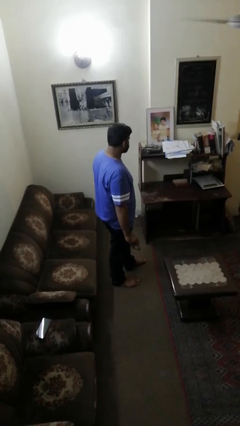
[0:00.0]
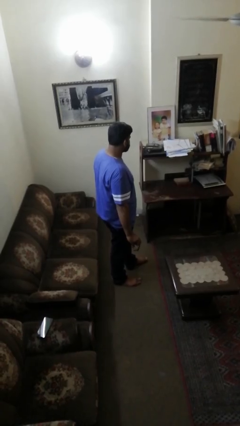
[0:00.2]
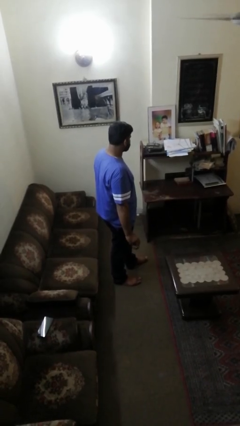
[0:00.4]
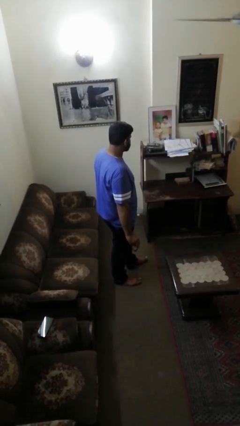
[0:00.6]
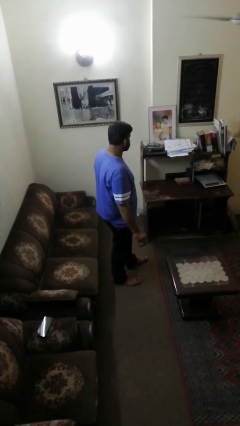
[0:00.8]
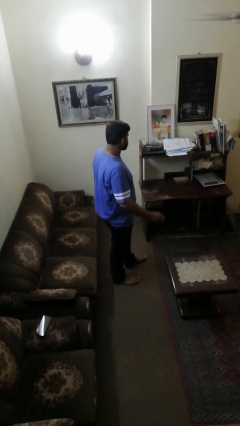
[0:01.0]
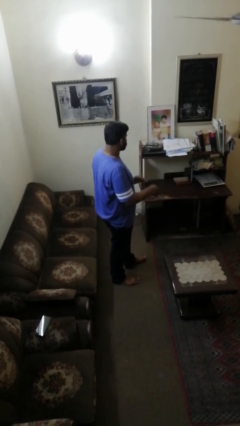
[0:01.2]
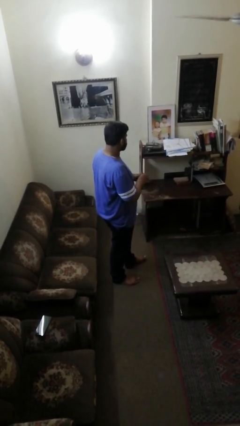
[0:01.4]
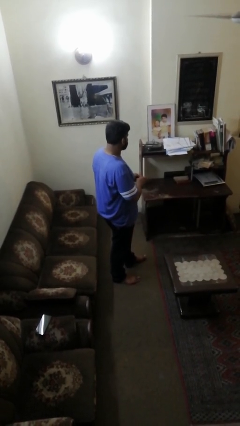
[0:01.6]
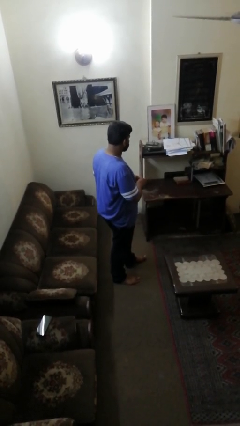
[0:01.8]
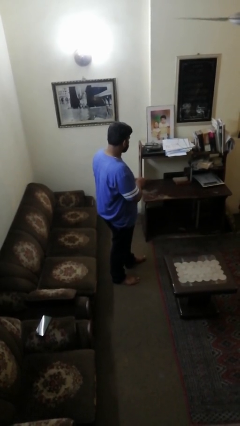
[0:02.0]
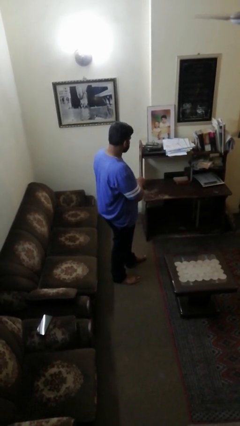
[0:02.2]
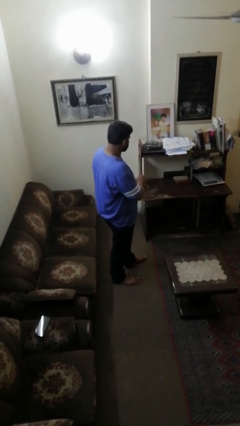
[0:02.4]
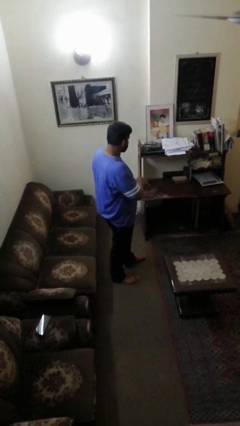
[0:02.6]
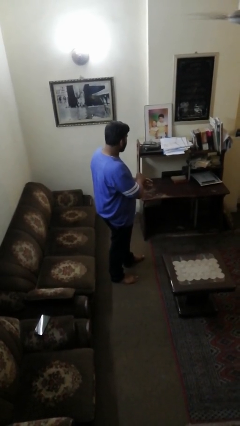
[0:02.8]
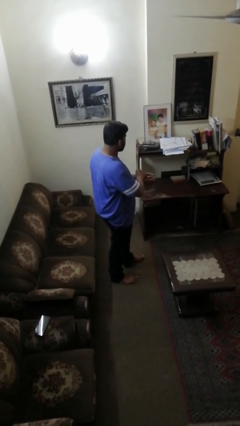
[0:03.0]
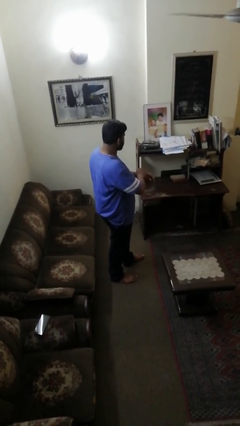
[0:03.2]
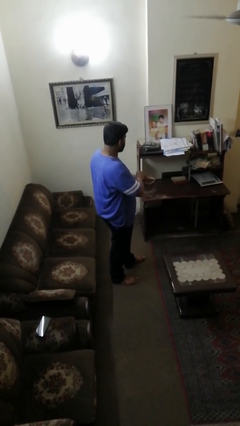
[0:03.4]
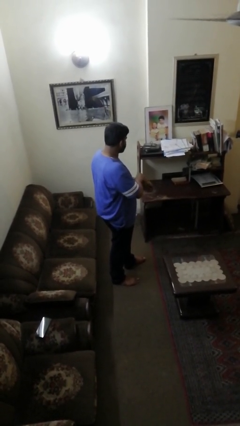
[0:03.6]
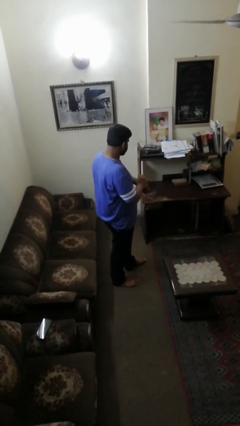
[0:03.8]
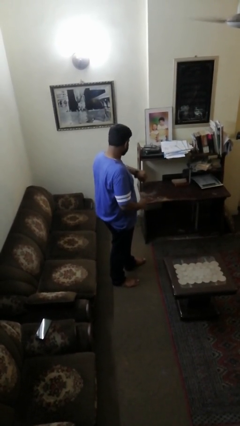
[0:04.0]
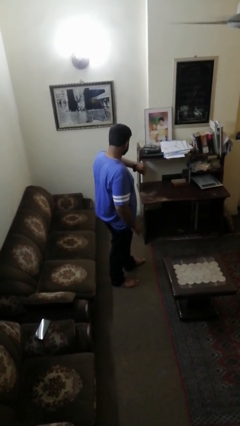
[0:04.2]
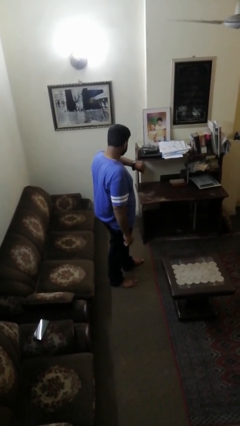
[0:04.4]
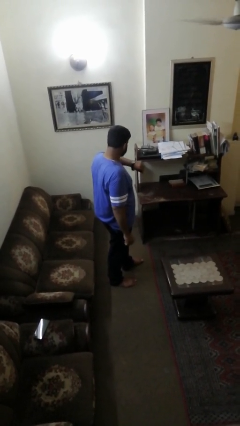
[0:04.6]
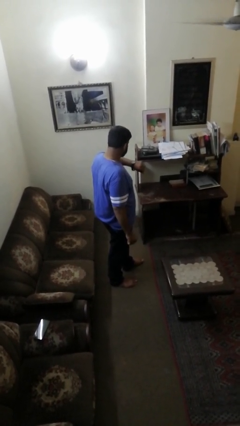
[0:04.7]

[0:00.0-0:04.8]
person puts on wristwatch

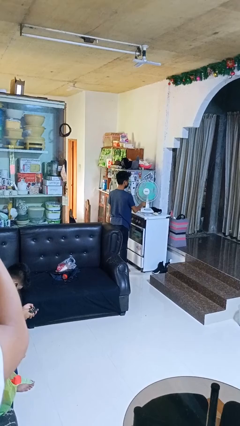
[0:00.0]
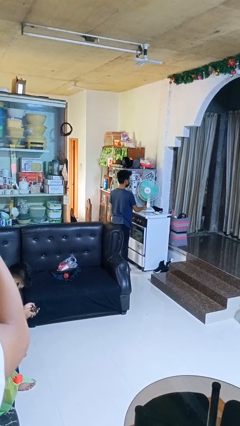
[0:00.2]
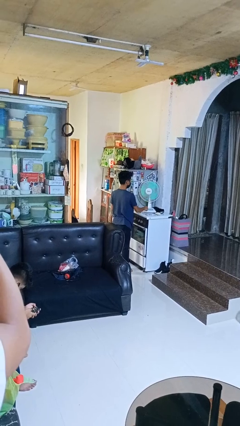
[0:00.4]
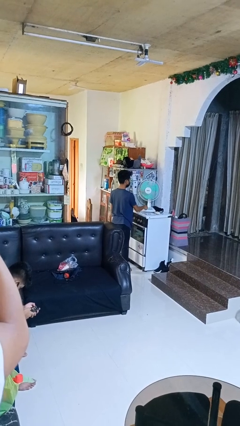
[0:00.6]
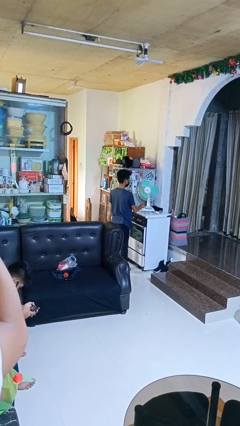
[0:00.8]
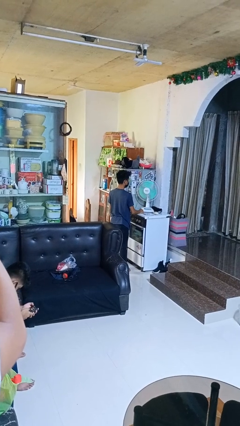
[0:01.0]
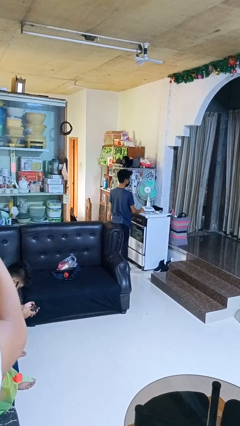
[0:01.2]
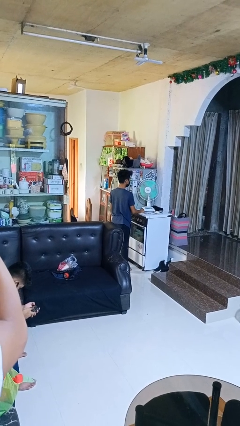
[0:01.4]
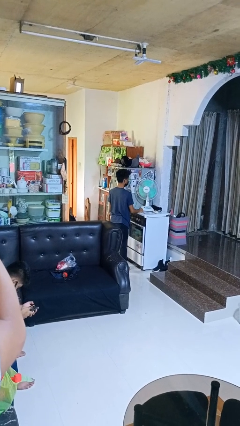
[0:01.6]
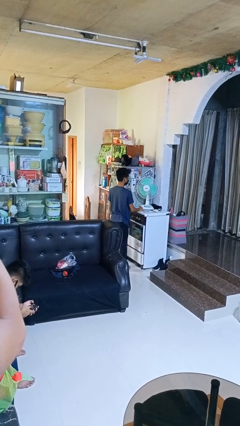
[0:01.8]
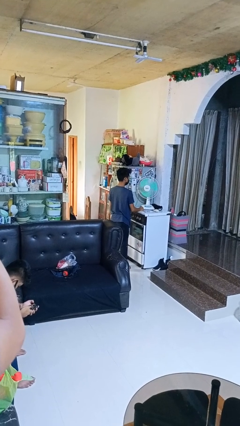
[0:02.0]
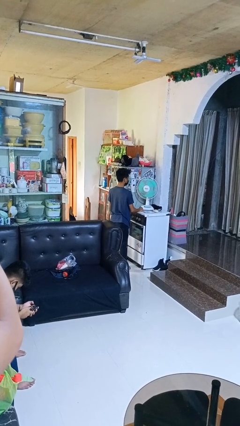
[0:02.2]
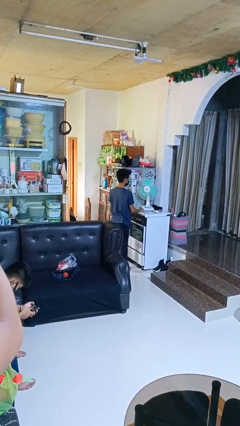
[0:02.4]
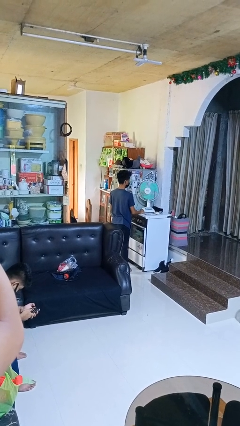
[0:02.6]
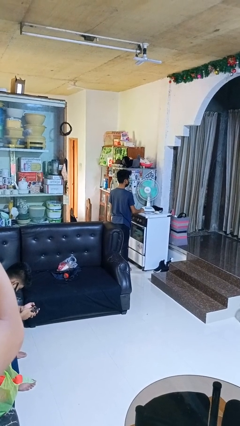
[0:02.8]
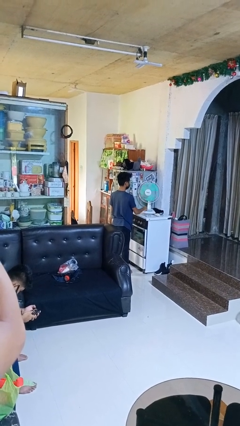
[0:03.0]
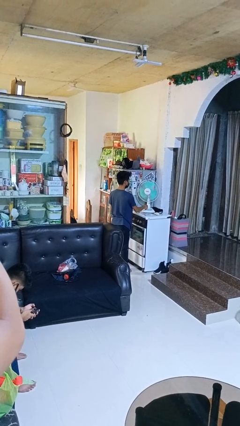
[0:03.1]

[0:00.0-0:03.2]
person turns off fan

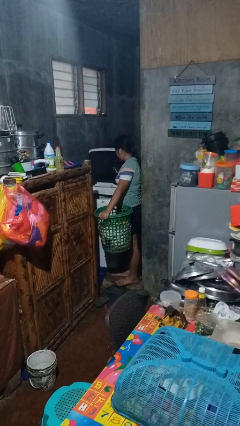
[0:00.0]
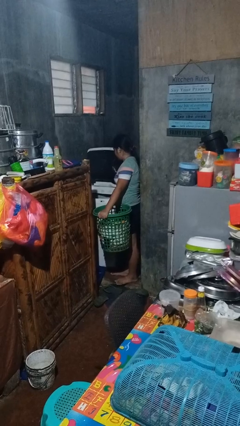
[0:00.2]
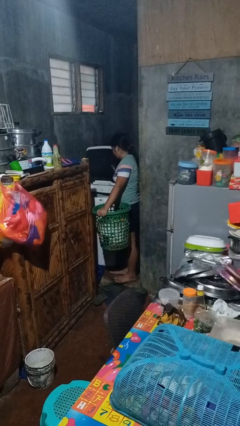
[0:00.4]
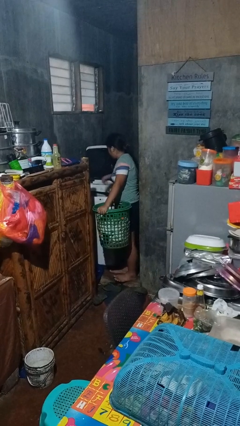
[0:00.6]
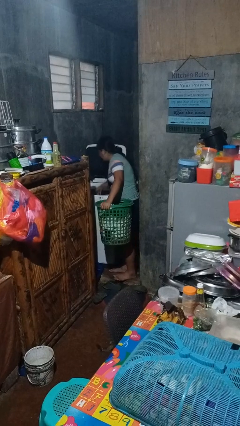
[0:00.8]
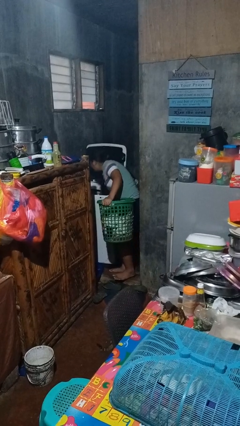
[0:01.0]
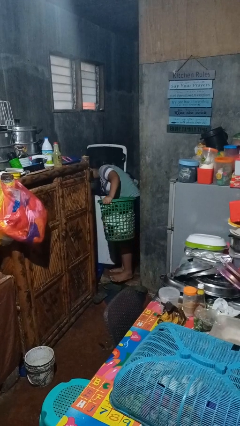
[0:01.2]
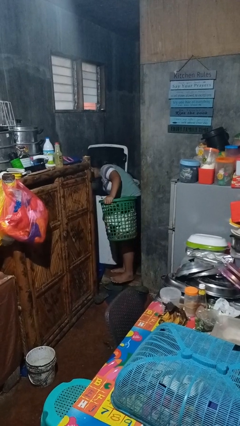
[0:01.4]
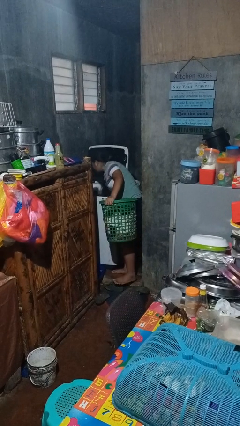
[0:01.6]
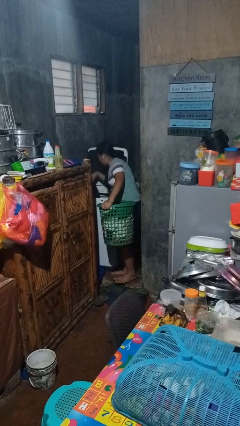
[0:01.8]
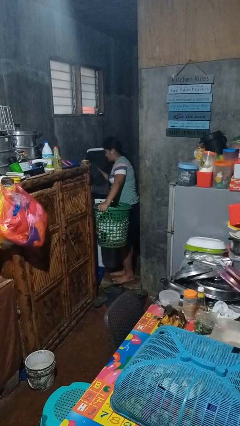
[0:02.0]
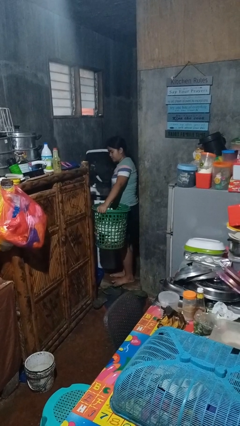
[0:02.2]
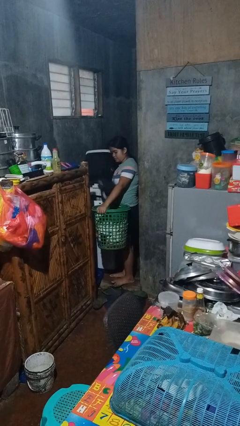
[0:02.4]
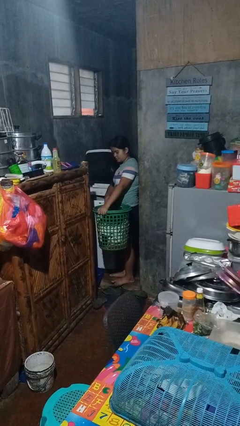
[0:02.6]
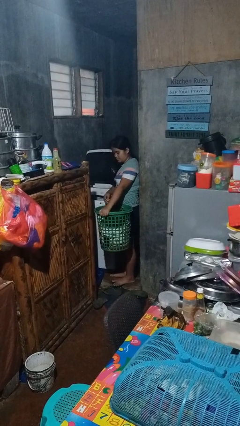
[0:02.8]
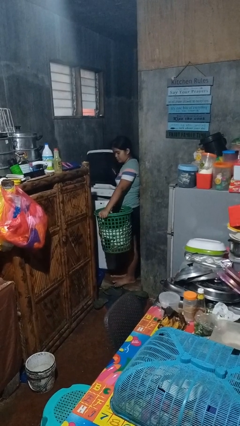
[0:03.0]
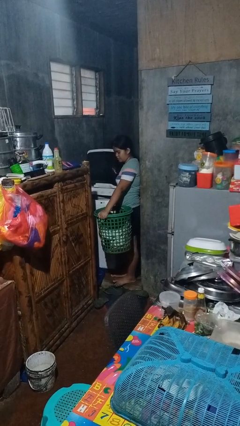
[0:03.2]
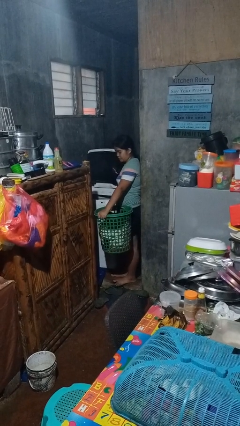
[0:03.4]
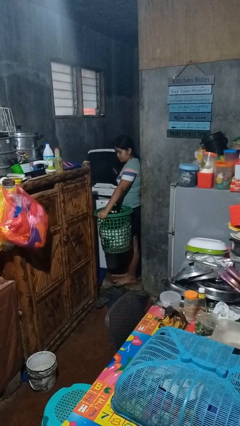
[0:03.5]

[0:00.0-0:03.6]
person unloads clotheswasher

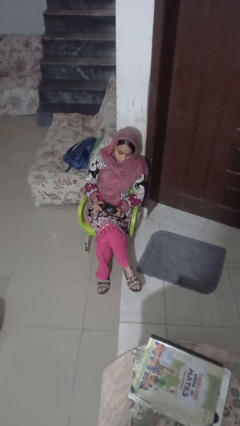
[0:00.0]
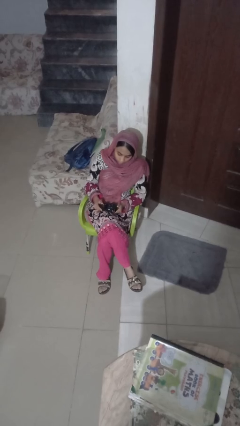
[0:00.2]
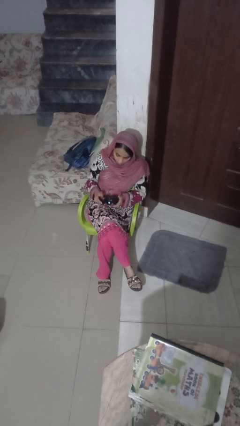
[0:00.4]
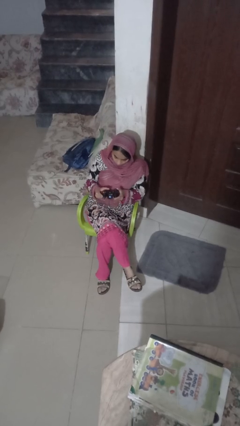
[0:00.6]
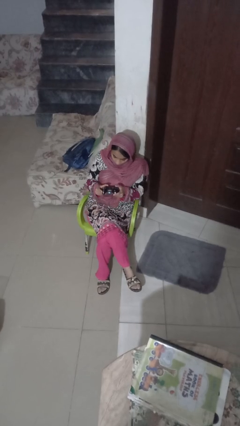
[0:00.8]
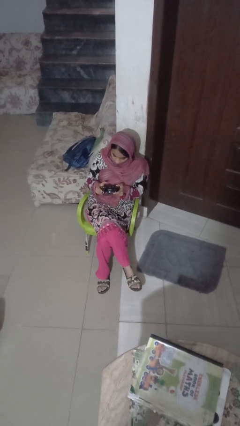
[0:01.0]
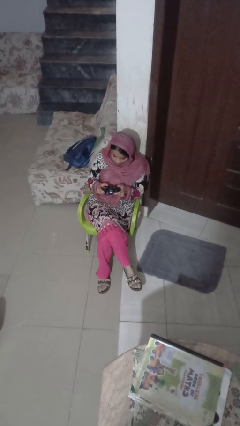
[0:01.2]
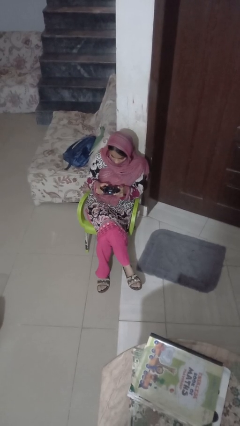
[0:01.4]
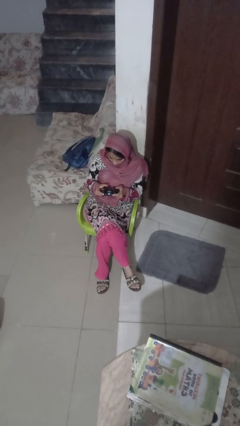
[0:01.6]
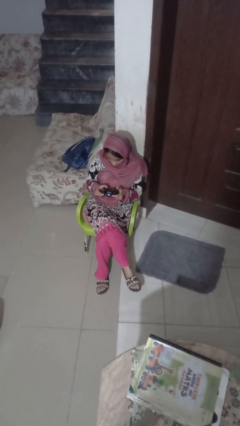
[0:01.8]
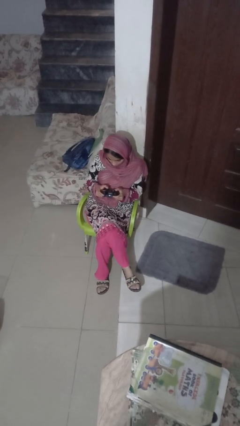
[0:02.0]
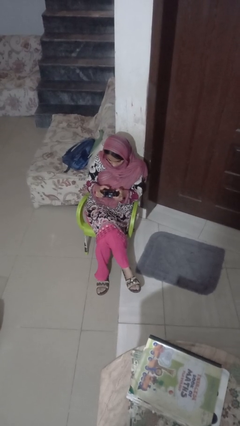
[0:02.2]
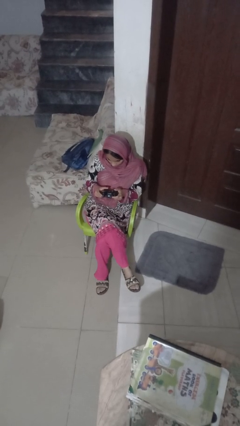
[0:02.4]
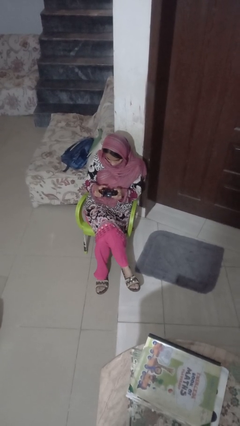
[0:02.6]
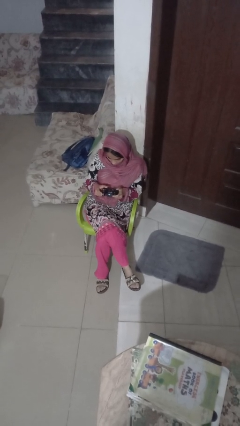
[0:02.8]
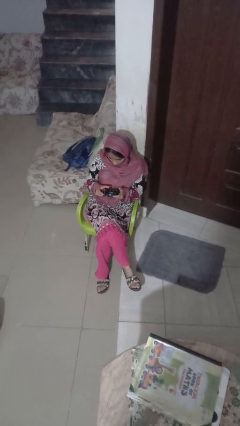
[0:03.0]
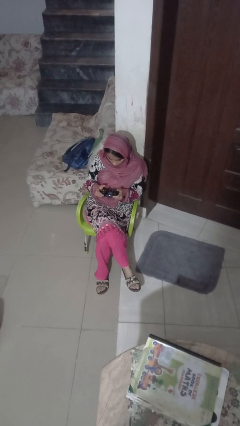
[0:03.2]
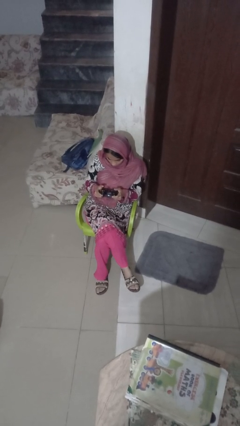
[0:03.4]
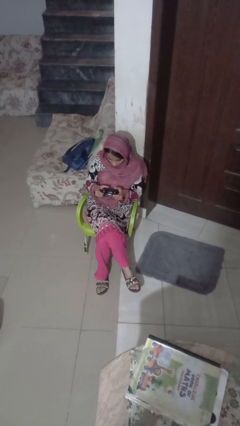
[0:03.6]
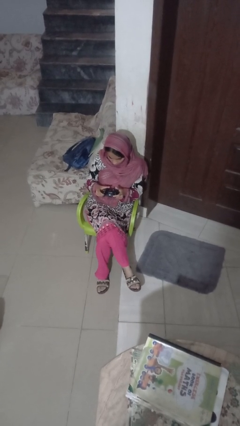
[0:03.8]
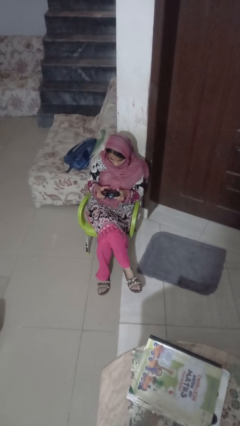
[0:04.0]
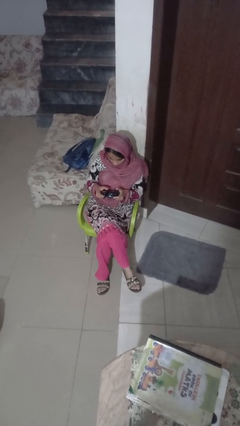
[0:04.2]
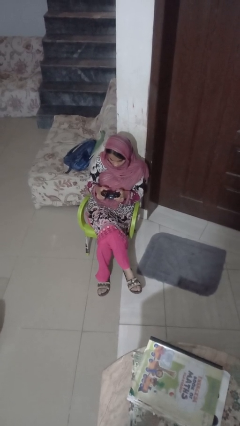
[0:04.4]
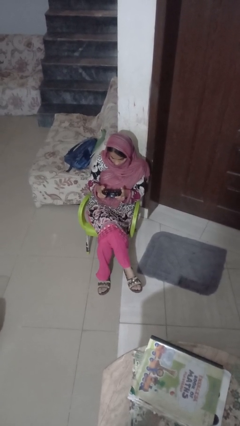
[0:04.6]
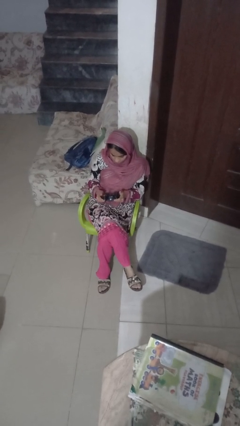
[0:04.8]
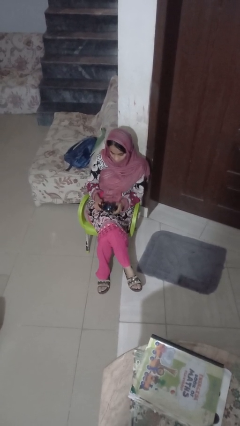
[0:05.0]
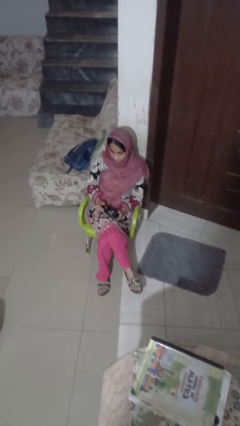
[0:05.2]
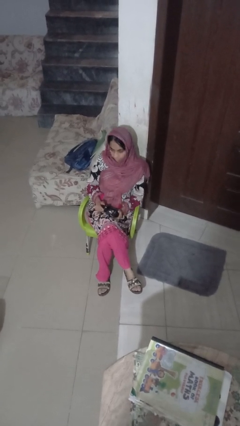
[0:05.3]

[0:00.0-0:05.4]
person interacts with handheld game
